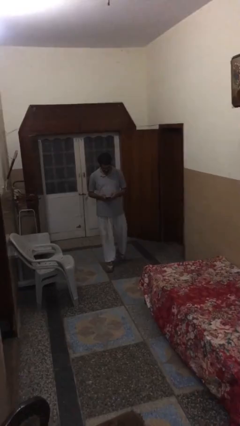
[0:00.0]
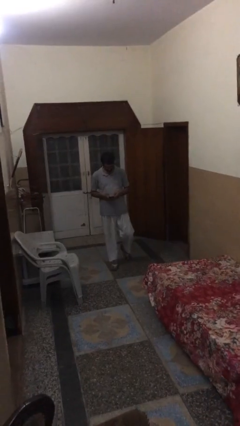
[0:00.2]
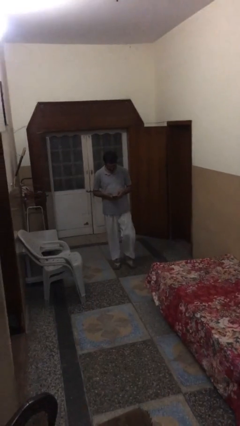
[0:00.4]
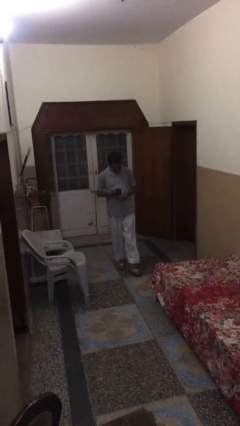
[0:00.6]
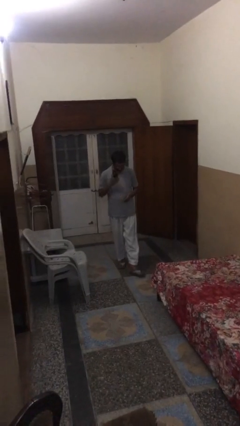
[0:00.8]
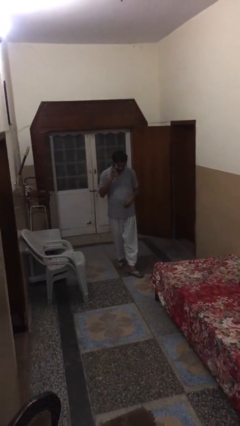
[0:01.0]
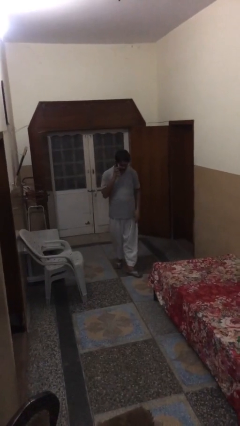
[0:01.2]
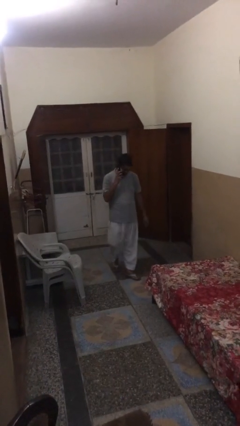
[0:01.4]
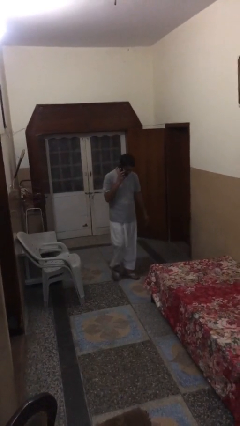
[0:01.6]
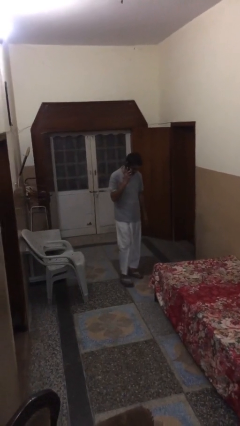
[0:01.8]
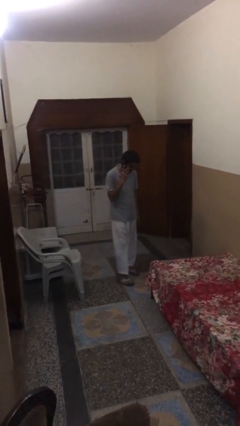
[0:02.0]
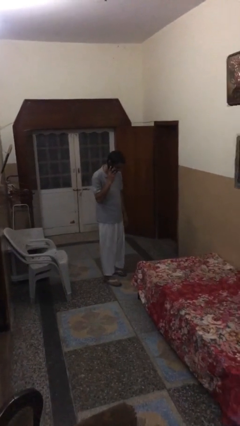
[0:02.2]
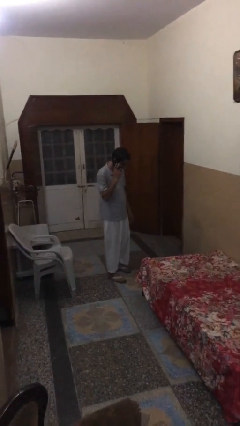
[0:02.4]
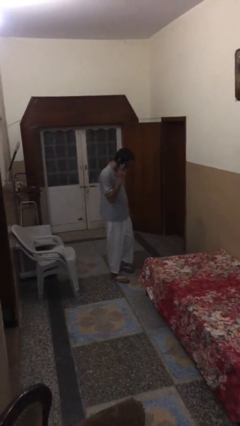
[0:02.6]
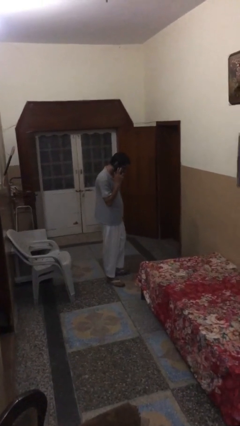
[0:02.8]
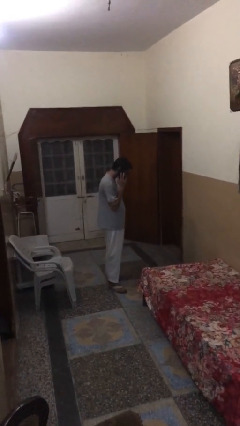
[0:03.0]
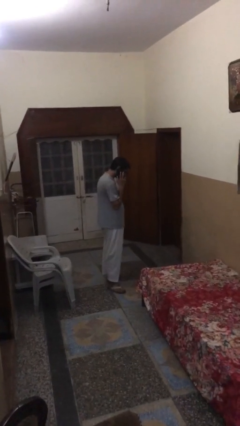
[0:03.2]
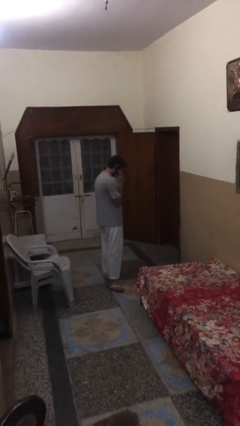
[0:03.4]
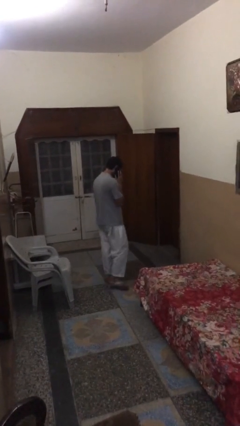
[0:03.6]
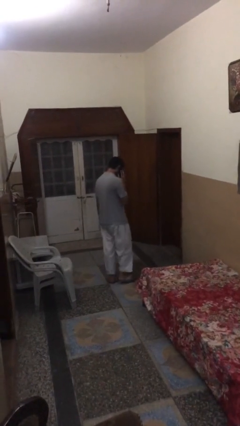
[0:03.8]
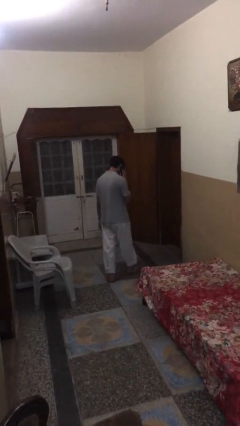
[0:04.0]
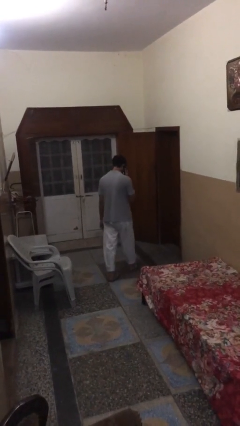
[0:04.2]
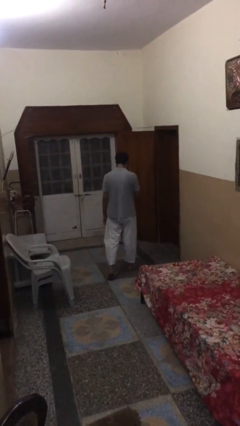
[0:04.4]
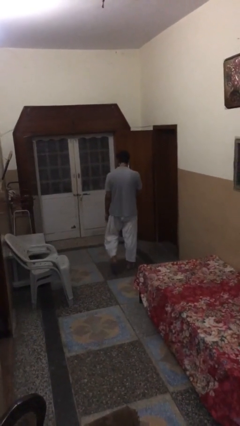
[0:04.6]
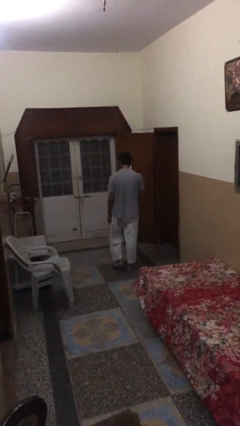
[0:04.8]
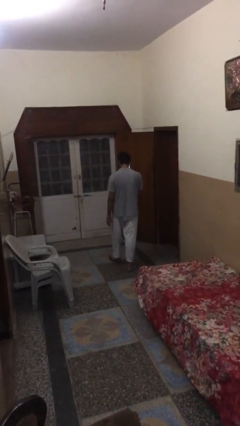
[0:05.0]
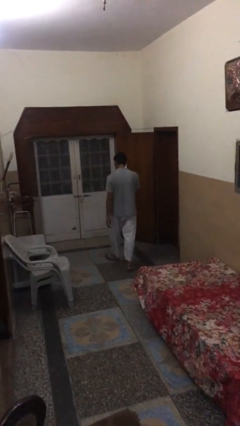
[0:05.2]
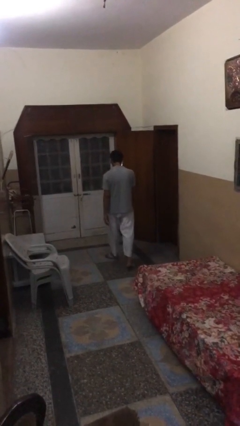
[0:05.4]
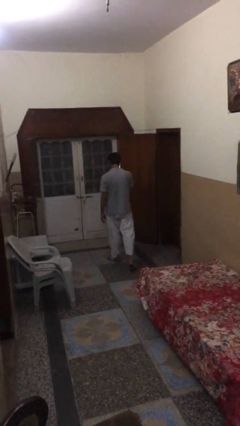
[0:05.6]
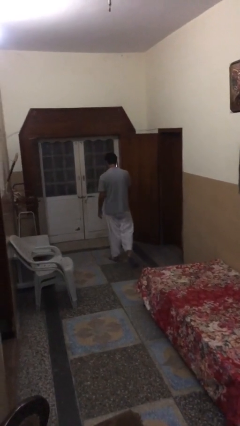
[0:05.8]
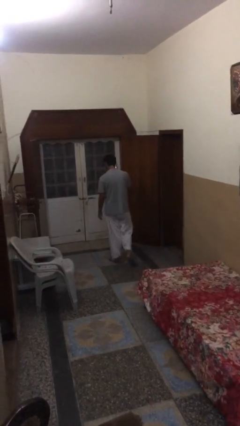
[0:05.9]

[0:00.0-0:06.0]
person talks on phone

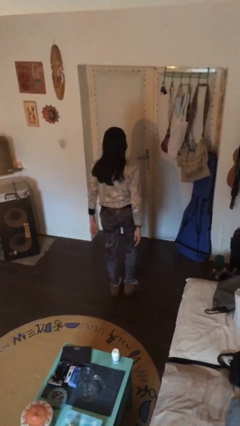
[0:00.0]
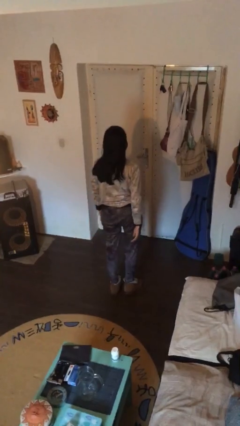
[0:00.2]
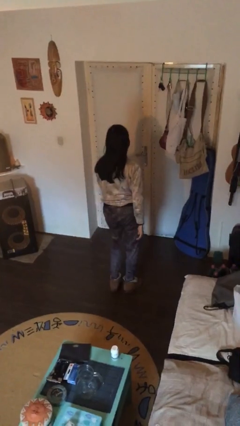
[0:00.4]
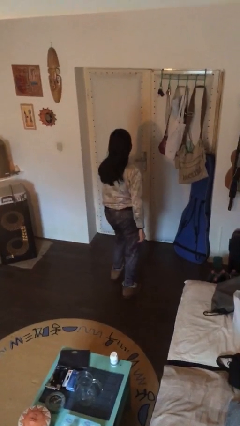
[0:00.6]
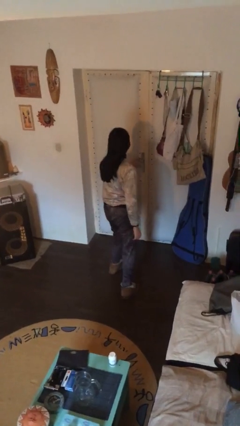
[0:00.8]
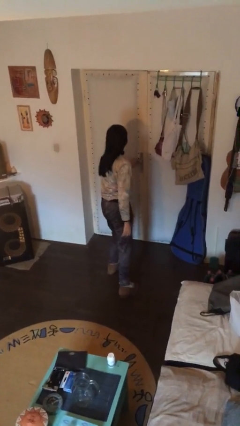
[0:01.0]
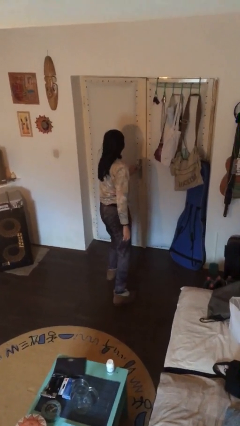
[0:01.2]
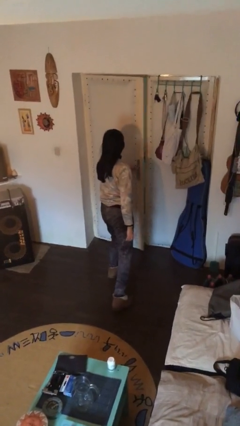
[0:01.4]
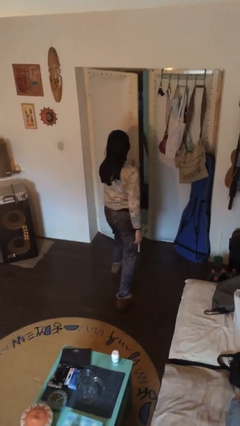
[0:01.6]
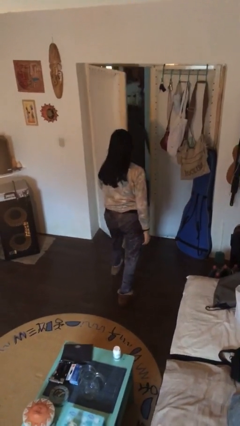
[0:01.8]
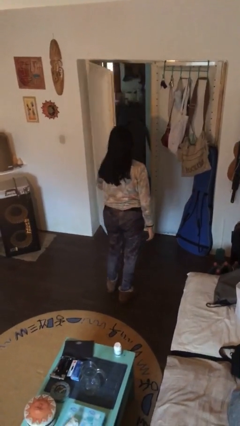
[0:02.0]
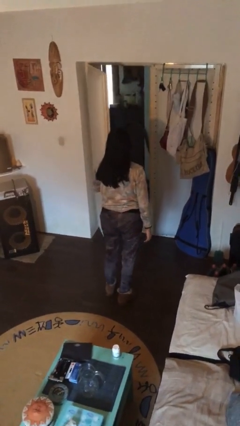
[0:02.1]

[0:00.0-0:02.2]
person opens facility door

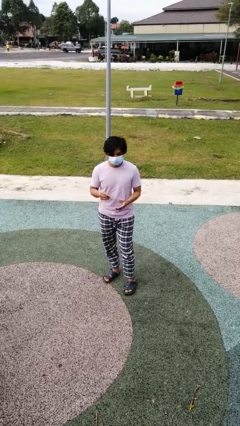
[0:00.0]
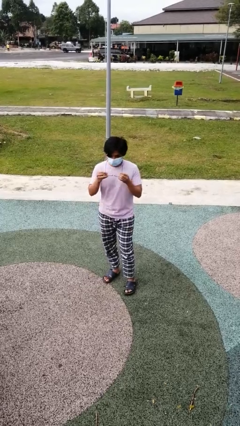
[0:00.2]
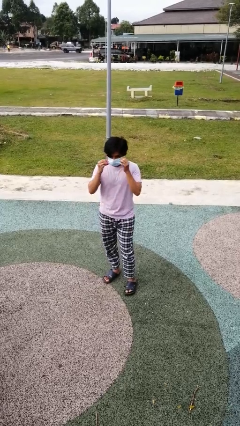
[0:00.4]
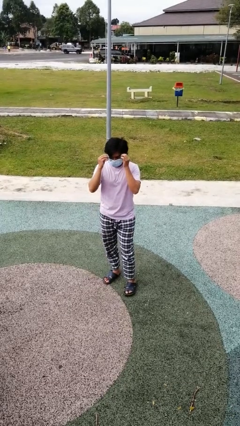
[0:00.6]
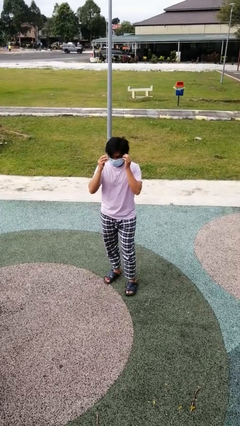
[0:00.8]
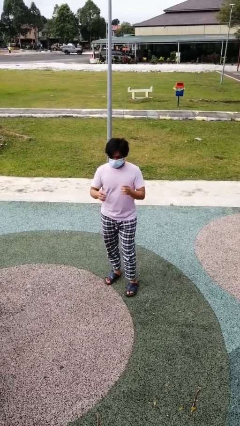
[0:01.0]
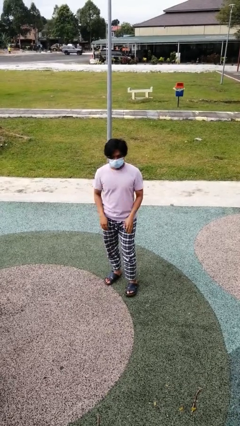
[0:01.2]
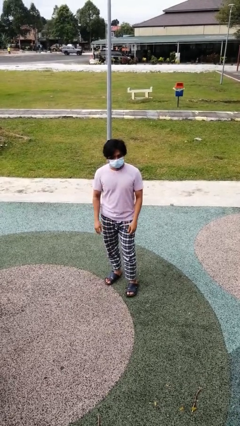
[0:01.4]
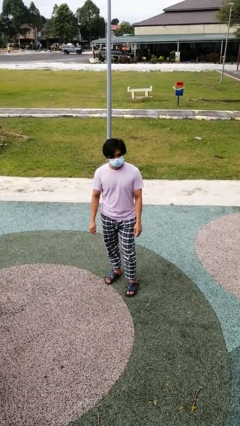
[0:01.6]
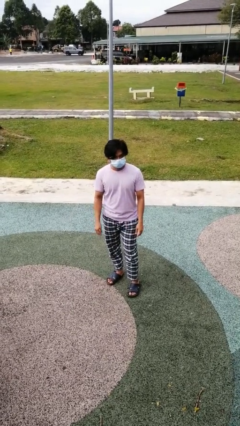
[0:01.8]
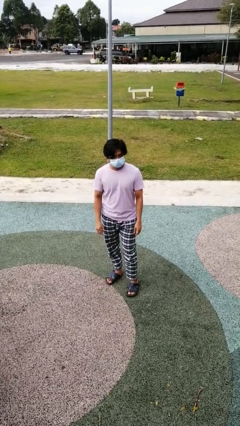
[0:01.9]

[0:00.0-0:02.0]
person puts on glasses

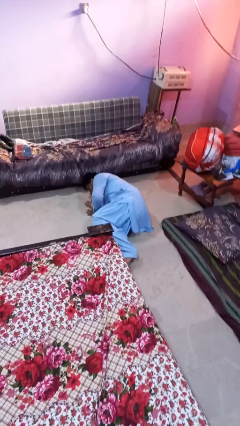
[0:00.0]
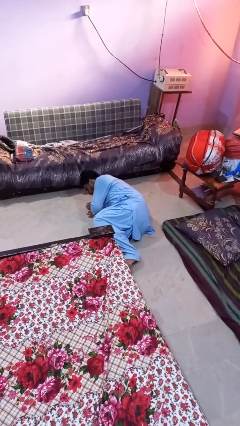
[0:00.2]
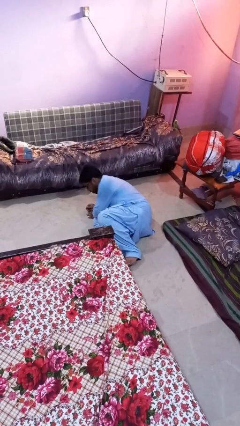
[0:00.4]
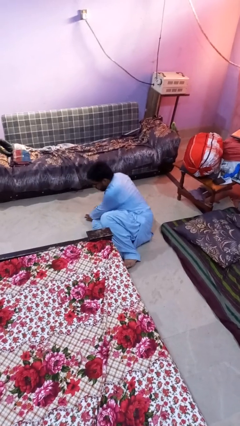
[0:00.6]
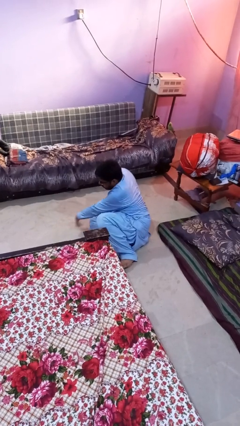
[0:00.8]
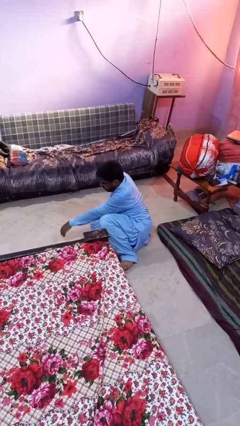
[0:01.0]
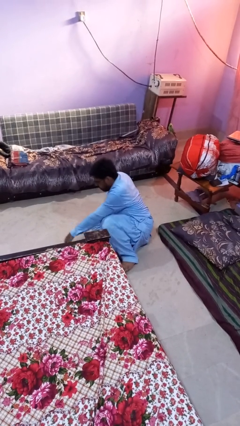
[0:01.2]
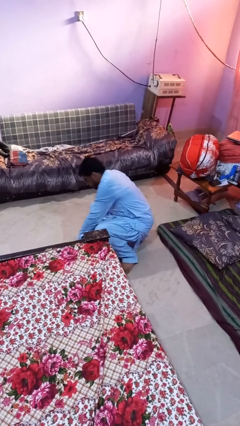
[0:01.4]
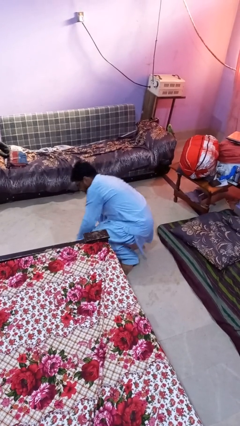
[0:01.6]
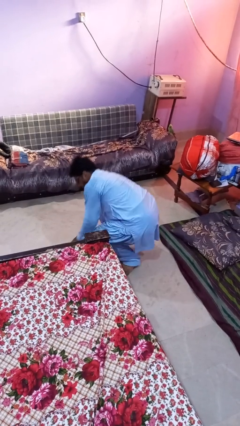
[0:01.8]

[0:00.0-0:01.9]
person stands up from floor

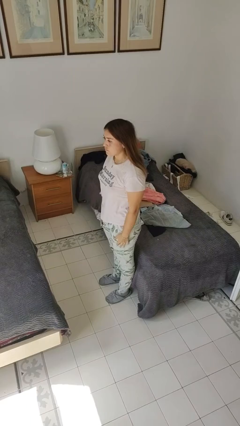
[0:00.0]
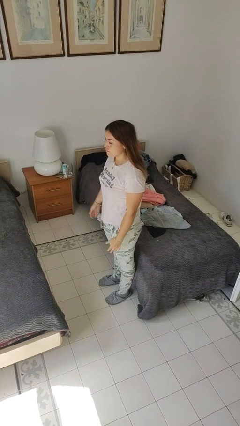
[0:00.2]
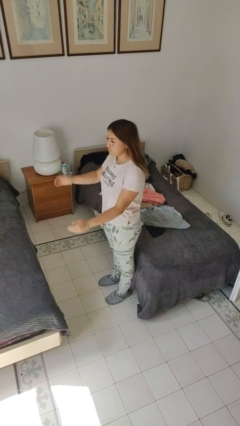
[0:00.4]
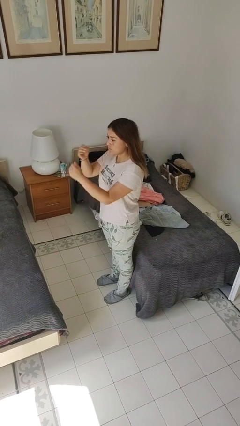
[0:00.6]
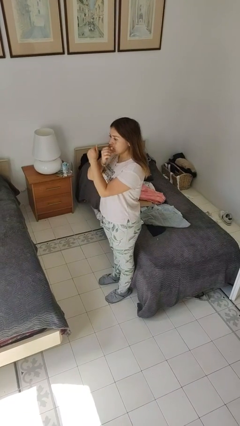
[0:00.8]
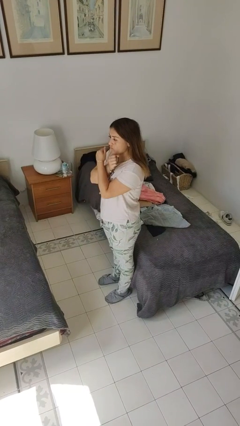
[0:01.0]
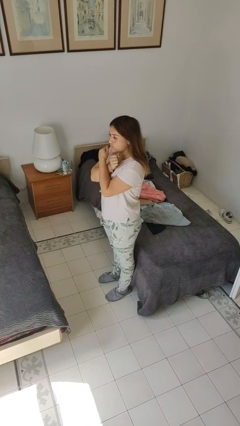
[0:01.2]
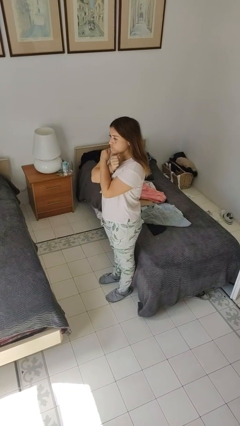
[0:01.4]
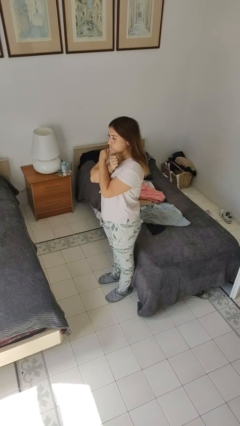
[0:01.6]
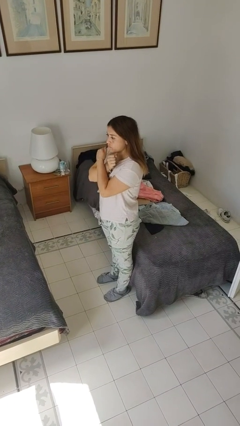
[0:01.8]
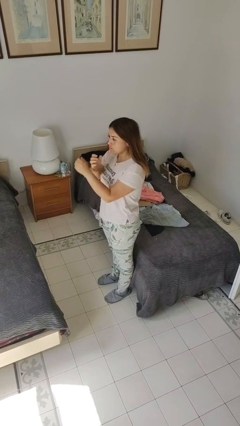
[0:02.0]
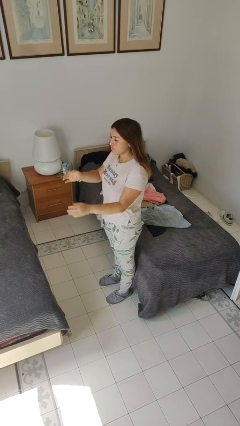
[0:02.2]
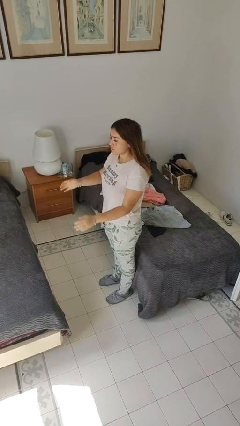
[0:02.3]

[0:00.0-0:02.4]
person gestures arms x

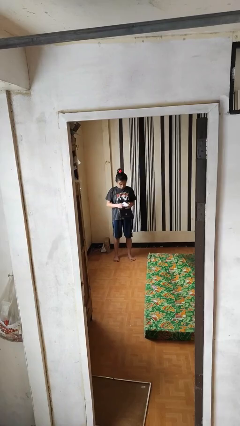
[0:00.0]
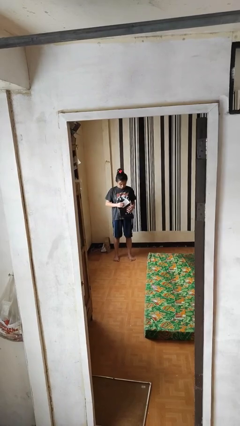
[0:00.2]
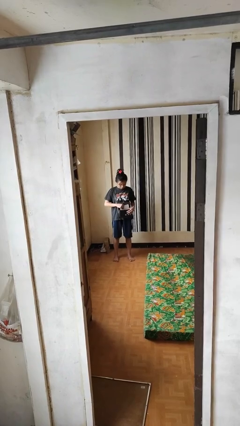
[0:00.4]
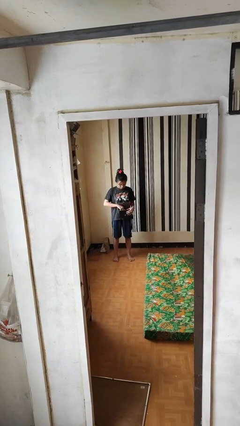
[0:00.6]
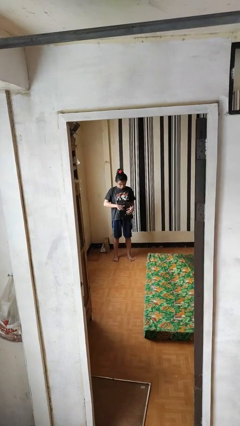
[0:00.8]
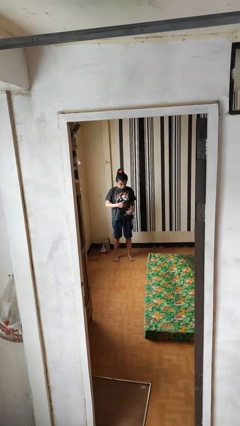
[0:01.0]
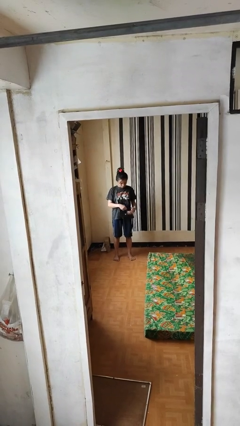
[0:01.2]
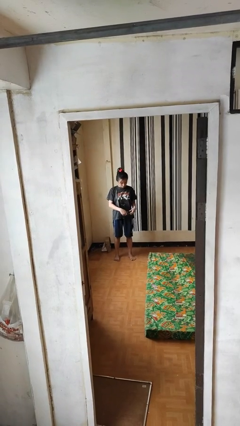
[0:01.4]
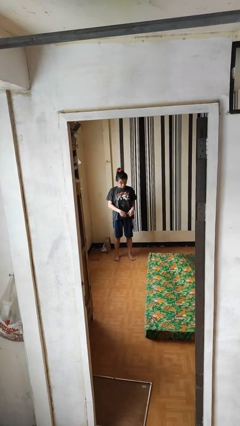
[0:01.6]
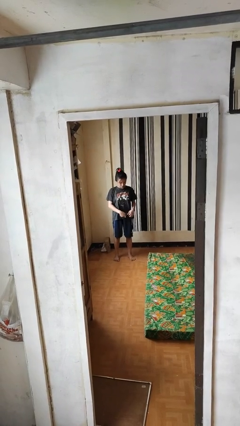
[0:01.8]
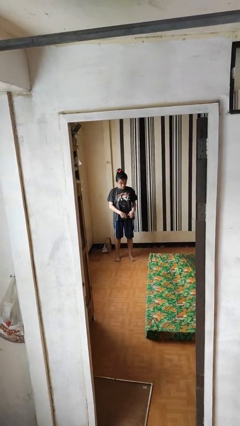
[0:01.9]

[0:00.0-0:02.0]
person puts object into purse

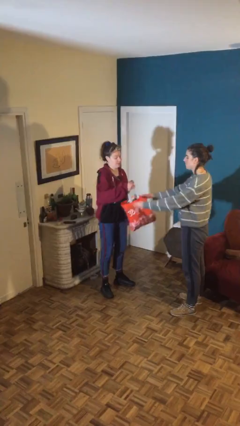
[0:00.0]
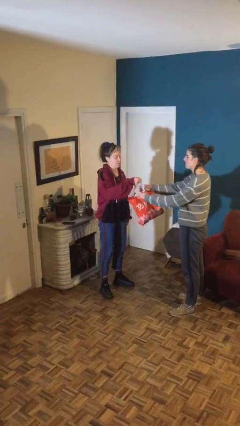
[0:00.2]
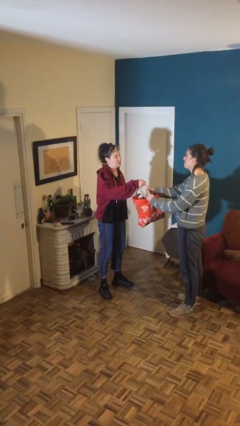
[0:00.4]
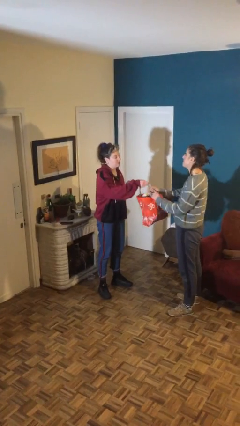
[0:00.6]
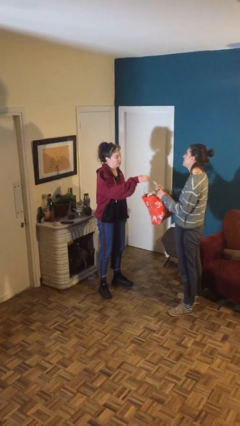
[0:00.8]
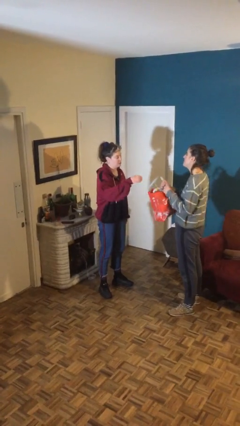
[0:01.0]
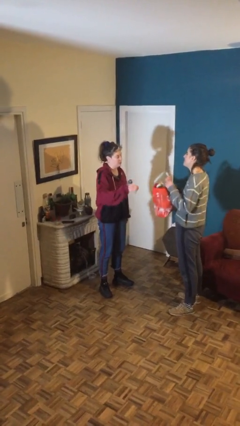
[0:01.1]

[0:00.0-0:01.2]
person transfers object to person
